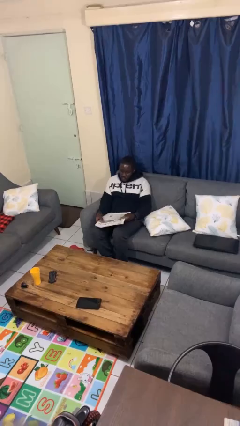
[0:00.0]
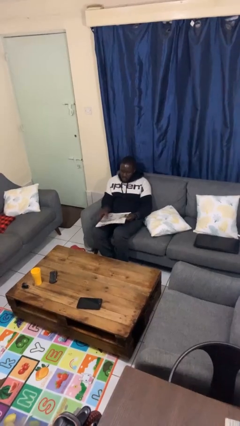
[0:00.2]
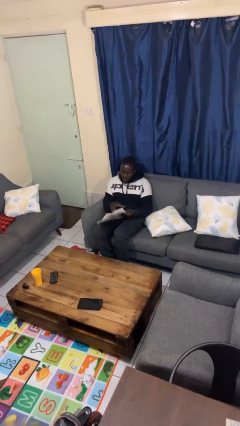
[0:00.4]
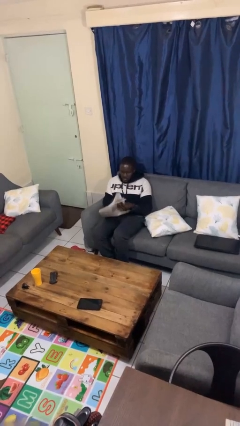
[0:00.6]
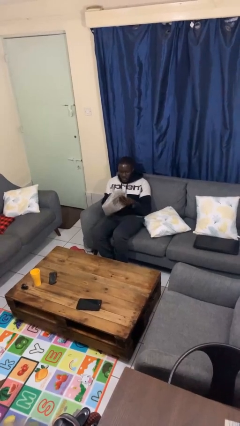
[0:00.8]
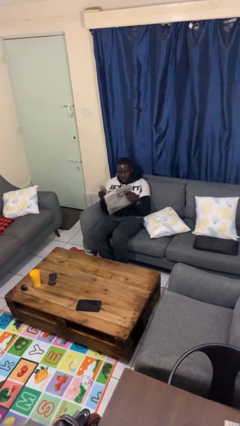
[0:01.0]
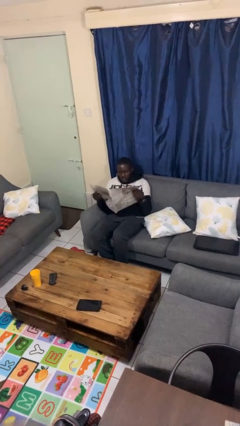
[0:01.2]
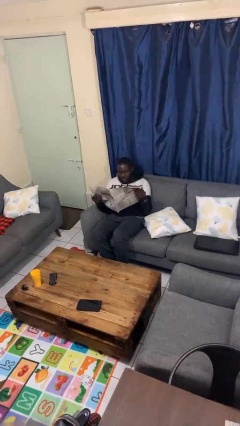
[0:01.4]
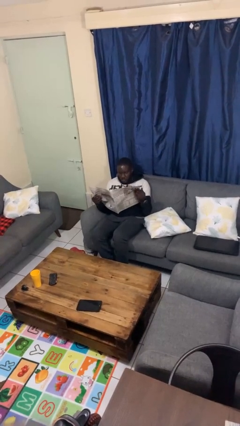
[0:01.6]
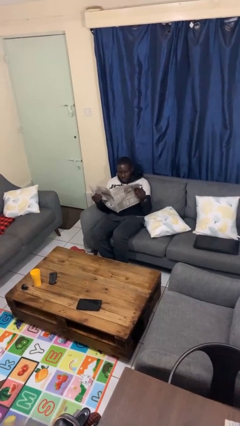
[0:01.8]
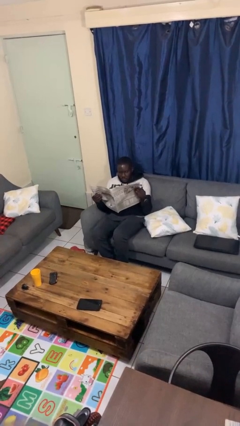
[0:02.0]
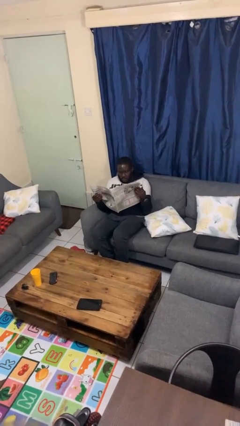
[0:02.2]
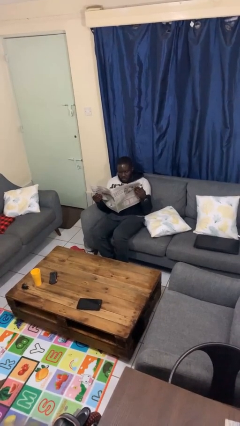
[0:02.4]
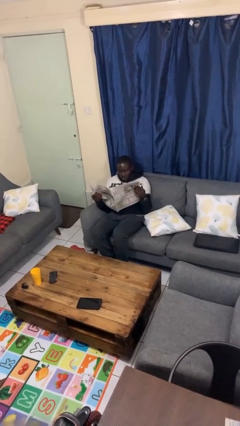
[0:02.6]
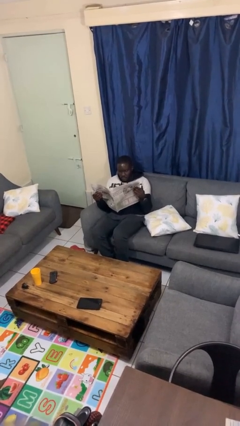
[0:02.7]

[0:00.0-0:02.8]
person reads newspaper

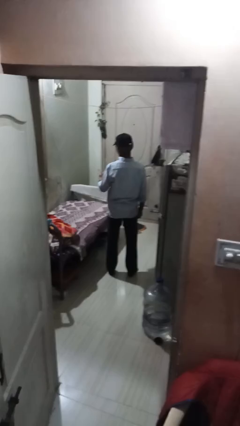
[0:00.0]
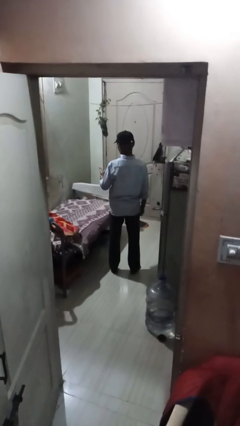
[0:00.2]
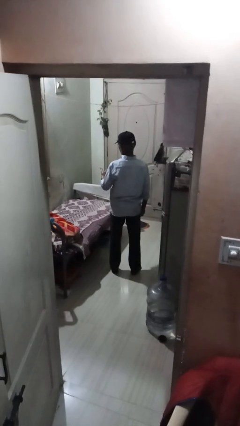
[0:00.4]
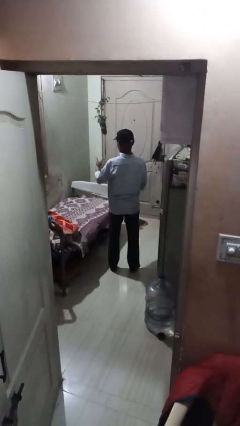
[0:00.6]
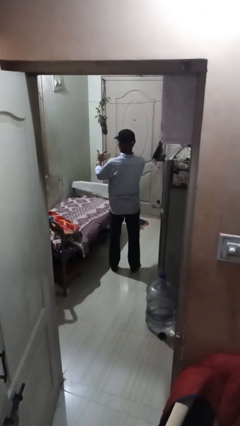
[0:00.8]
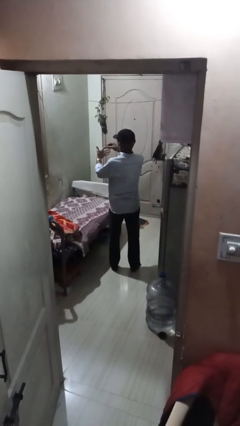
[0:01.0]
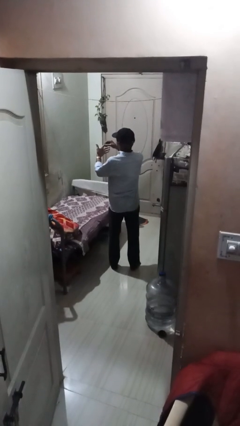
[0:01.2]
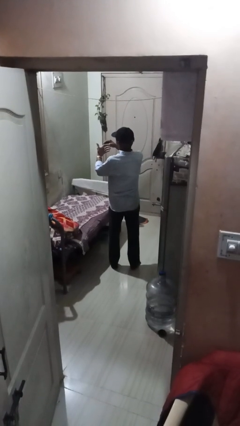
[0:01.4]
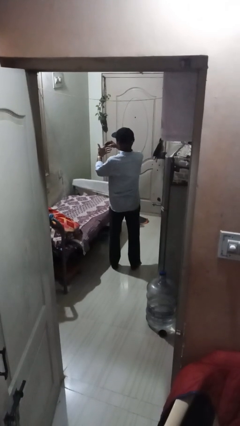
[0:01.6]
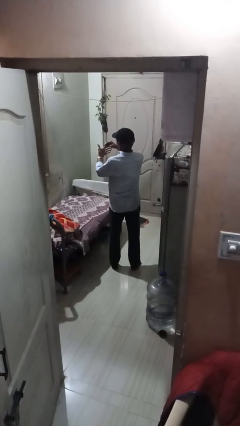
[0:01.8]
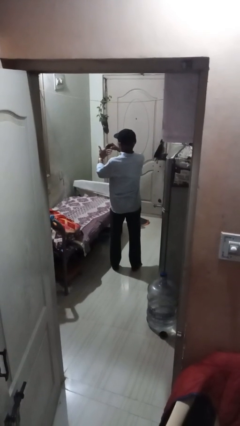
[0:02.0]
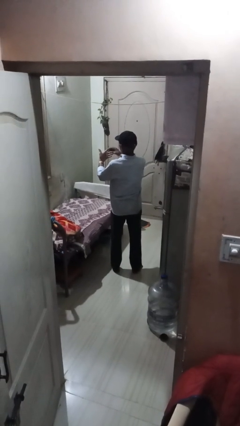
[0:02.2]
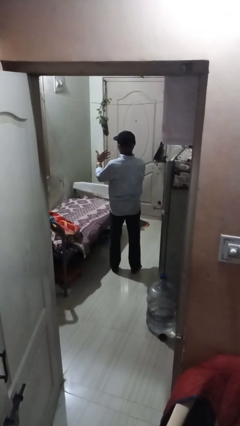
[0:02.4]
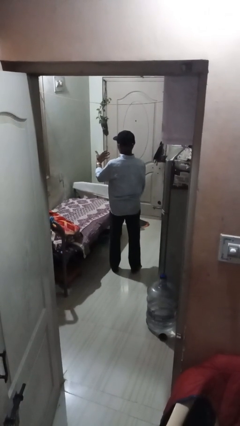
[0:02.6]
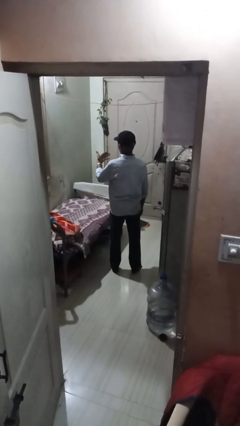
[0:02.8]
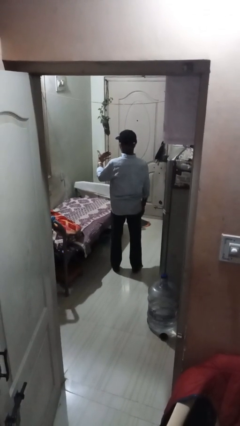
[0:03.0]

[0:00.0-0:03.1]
person puts on ring

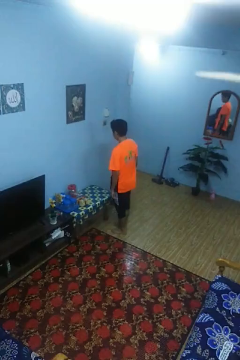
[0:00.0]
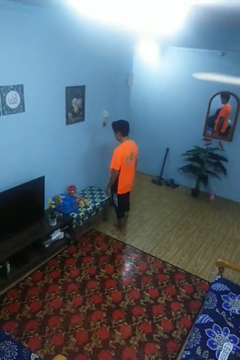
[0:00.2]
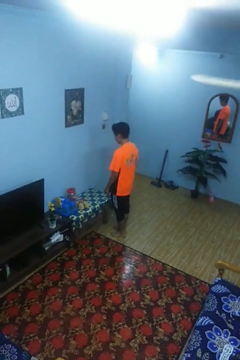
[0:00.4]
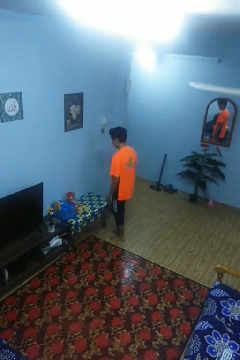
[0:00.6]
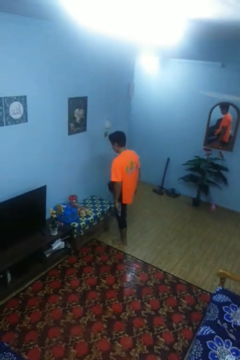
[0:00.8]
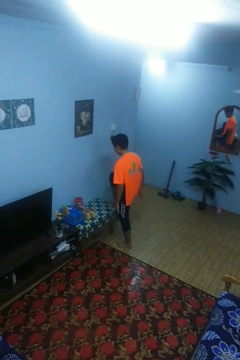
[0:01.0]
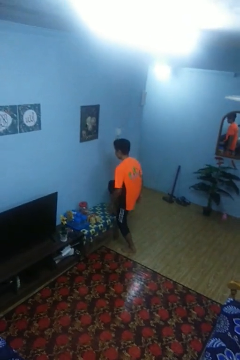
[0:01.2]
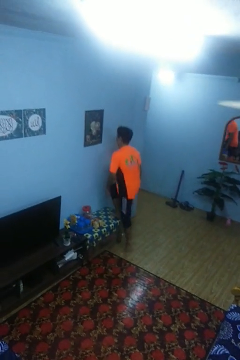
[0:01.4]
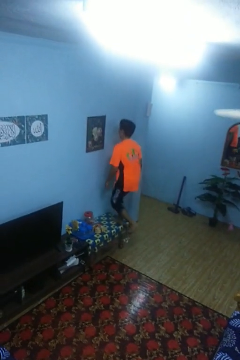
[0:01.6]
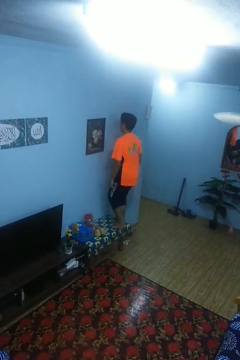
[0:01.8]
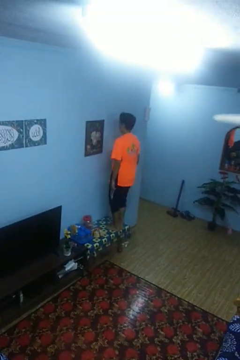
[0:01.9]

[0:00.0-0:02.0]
person climbs on table

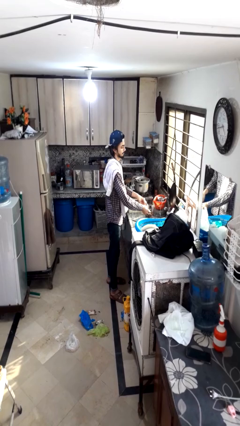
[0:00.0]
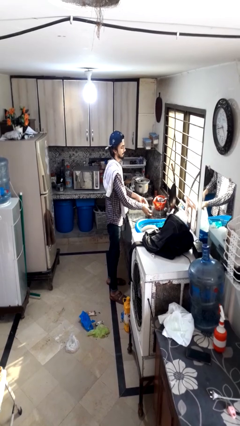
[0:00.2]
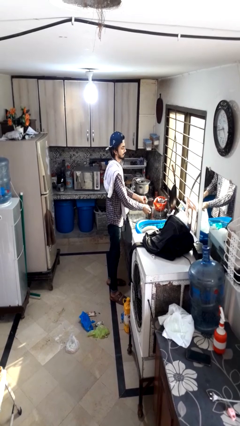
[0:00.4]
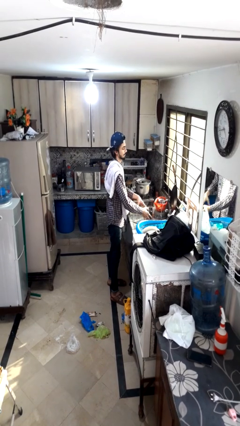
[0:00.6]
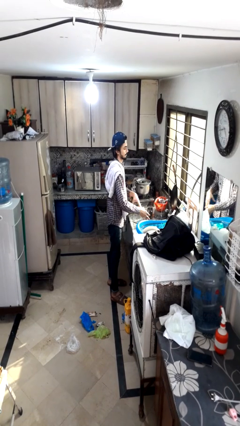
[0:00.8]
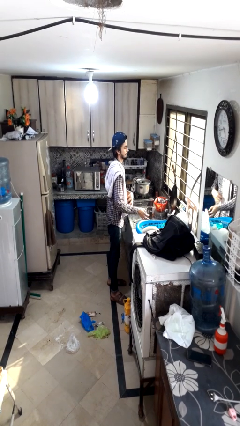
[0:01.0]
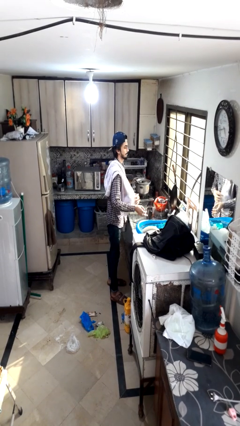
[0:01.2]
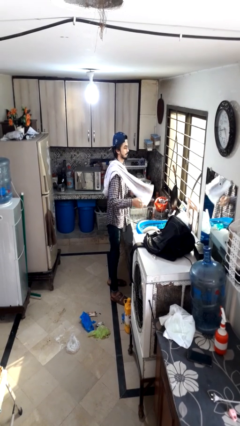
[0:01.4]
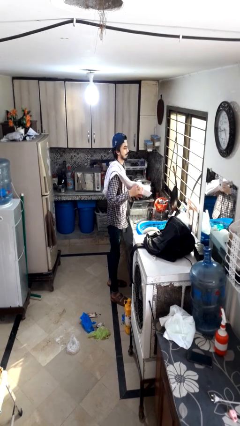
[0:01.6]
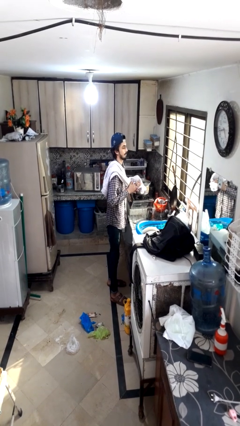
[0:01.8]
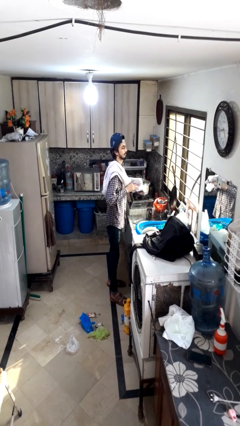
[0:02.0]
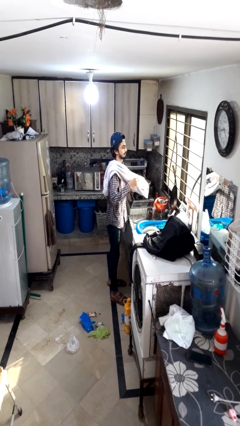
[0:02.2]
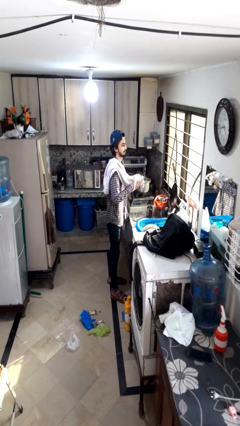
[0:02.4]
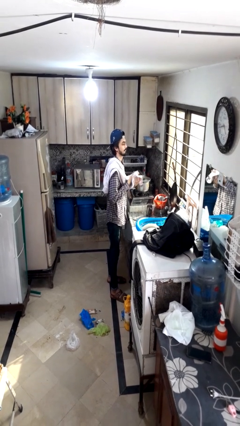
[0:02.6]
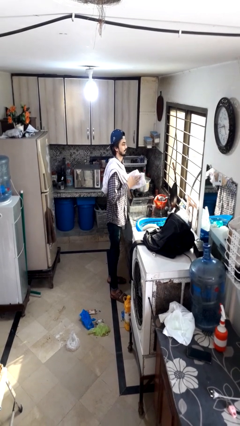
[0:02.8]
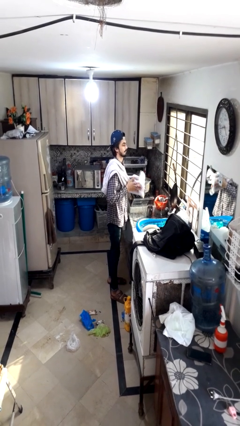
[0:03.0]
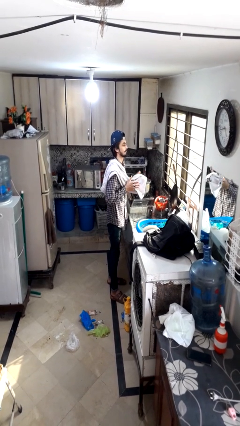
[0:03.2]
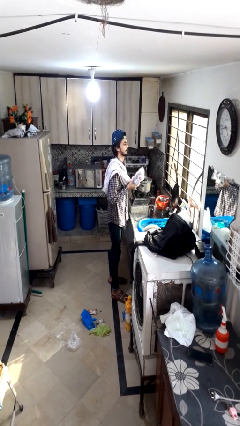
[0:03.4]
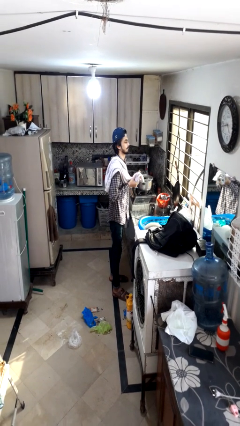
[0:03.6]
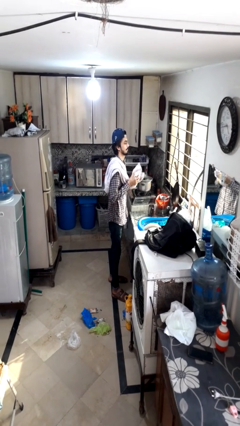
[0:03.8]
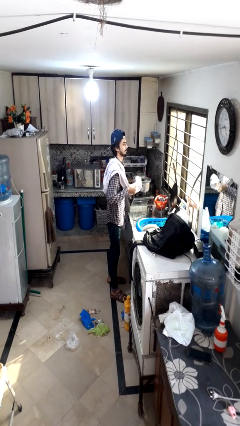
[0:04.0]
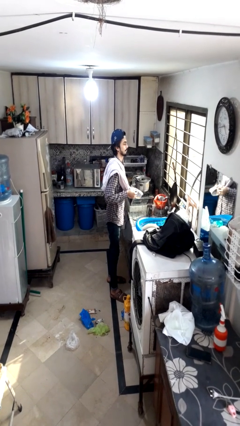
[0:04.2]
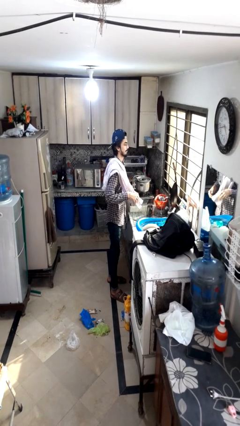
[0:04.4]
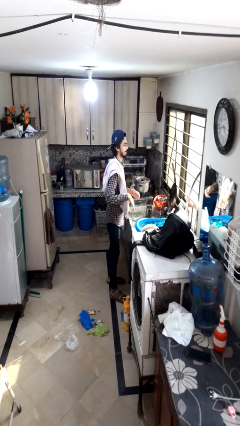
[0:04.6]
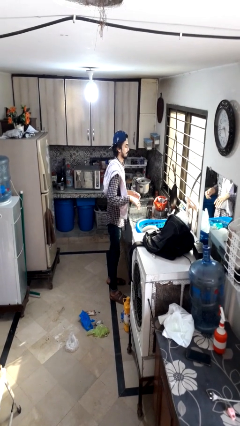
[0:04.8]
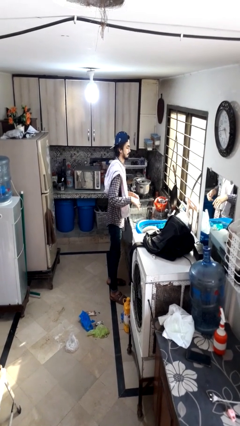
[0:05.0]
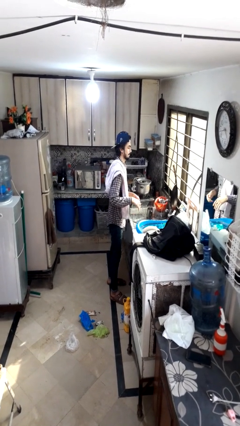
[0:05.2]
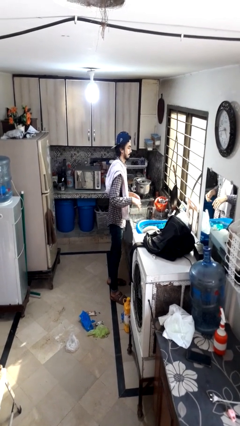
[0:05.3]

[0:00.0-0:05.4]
person dries hands with towel

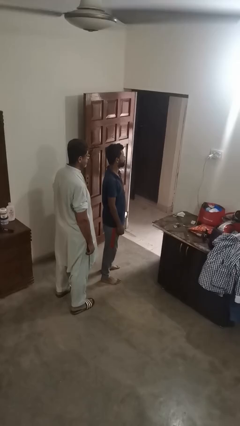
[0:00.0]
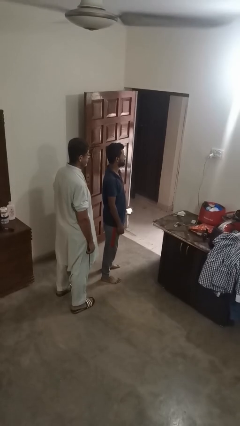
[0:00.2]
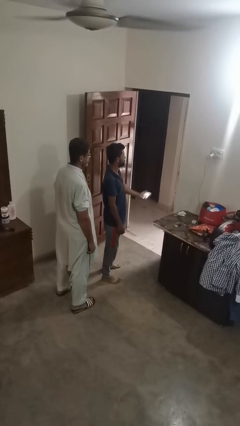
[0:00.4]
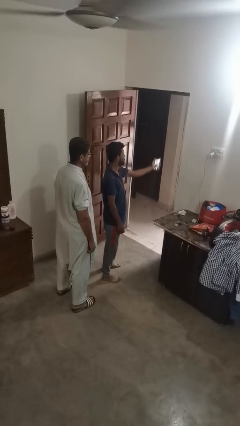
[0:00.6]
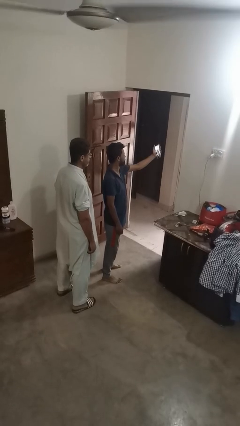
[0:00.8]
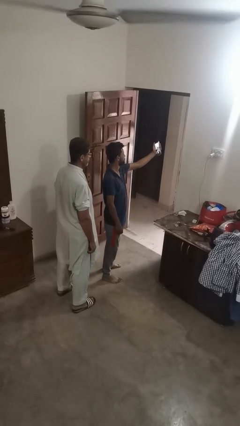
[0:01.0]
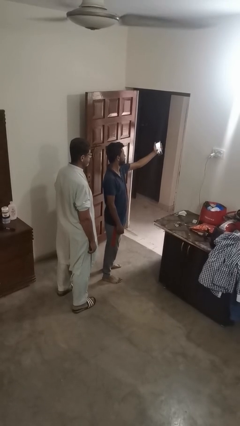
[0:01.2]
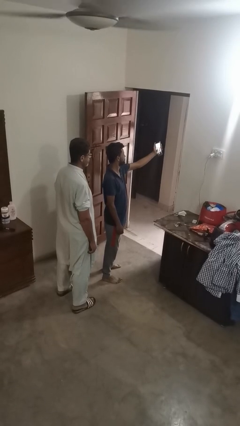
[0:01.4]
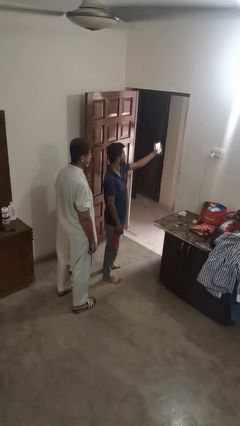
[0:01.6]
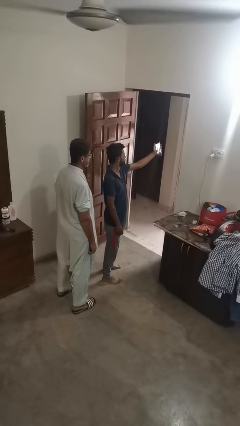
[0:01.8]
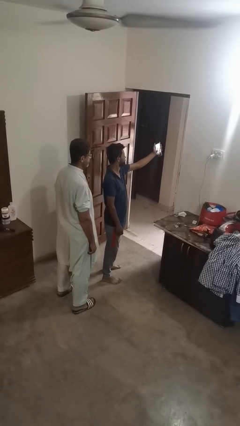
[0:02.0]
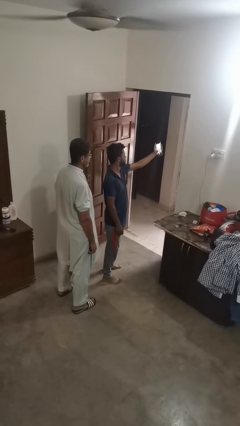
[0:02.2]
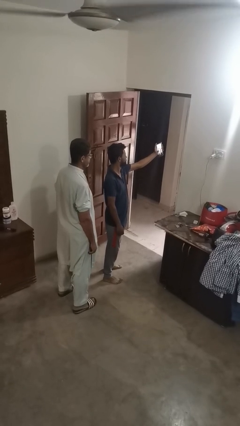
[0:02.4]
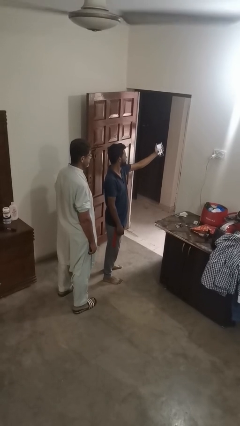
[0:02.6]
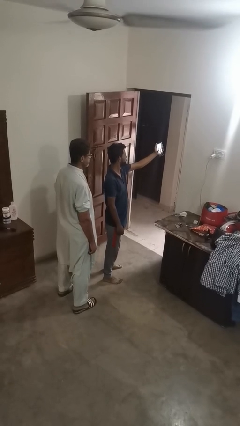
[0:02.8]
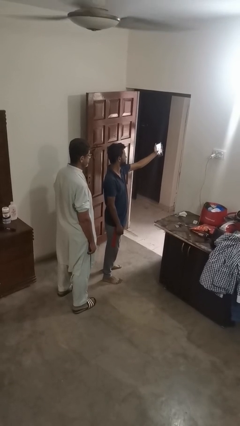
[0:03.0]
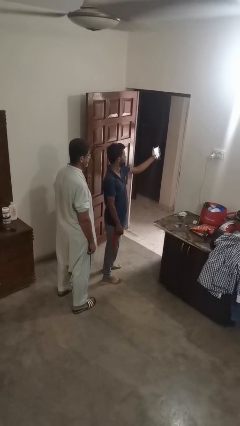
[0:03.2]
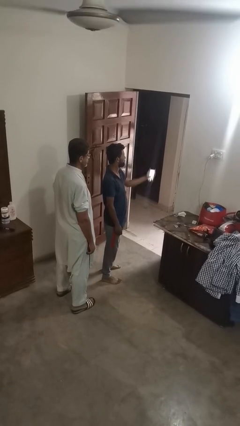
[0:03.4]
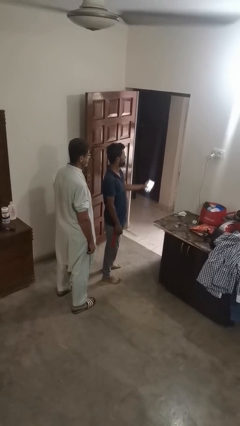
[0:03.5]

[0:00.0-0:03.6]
person takes selfie with person

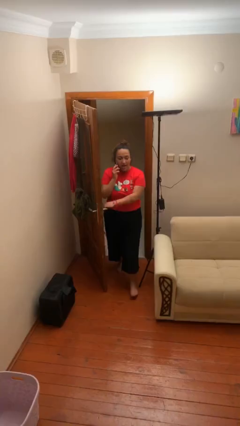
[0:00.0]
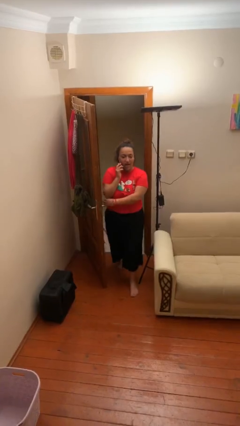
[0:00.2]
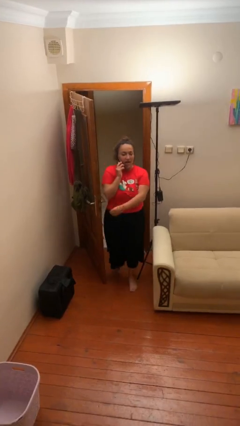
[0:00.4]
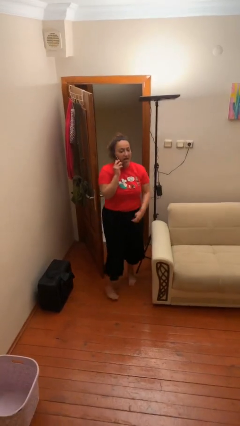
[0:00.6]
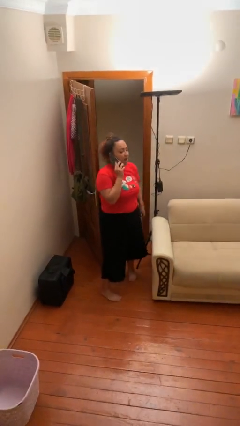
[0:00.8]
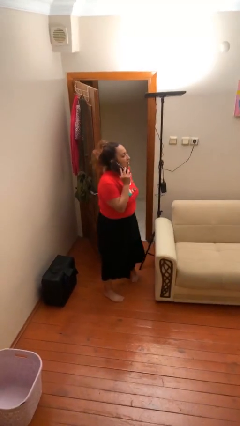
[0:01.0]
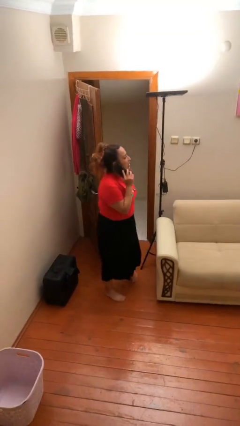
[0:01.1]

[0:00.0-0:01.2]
person enters scene through structure
